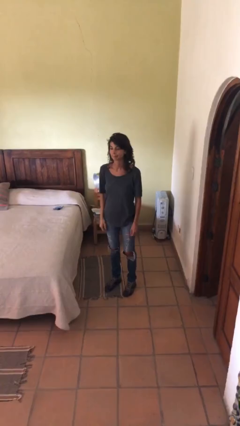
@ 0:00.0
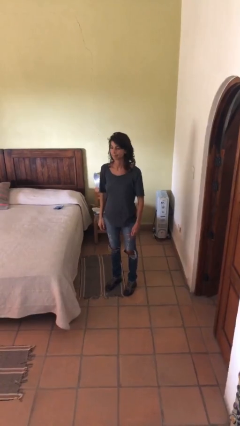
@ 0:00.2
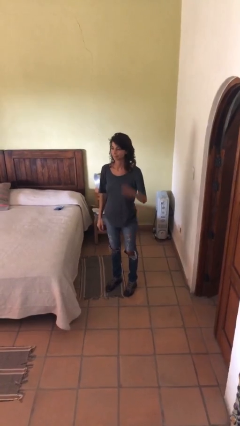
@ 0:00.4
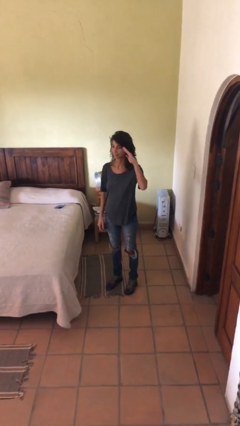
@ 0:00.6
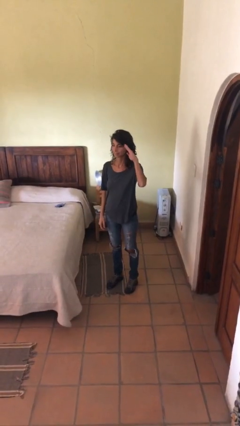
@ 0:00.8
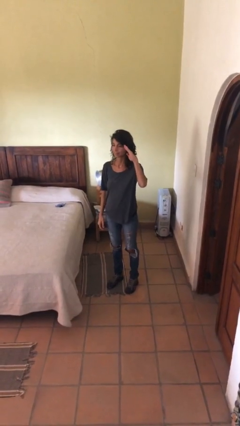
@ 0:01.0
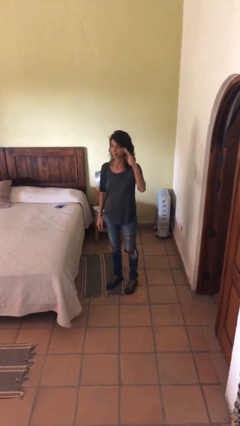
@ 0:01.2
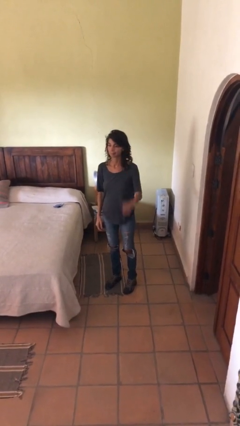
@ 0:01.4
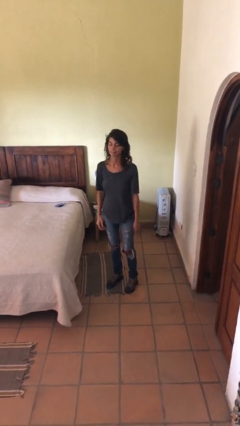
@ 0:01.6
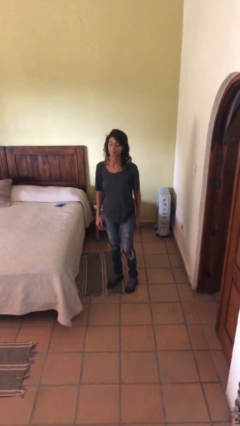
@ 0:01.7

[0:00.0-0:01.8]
person salutes

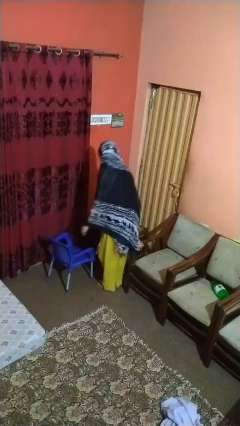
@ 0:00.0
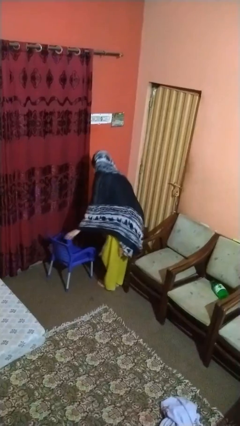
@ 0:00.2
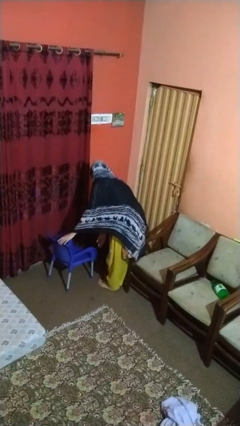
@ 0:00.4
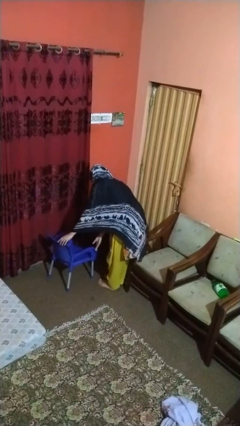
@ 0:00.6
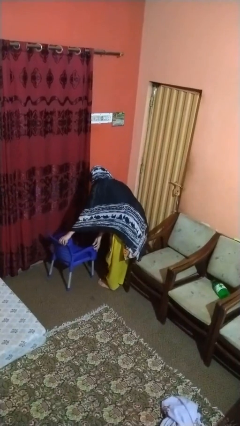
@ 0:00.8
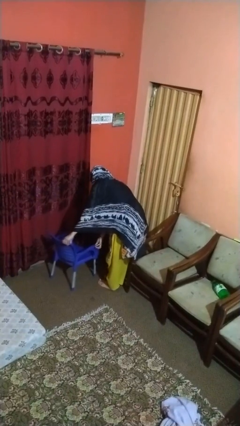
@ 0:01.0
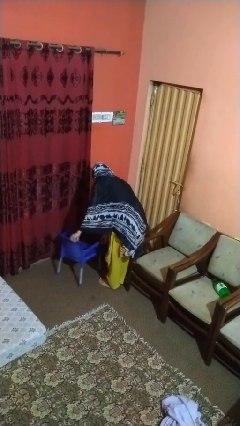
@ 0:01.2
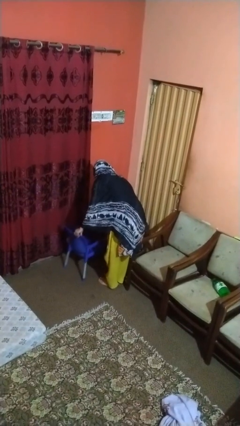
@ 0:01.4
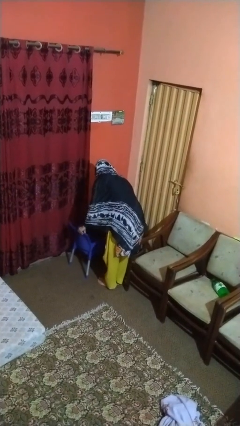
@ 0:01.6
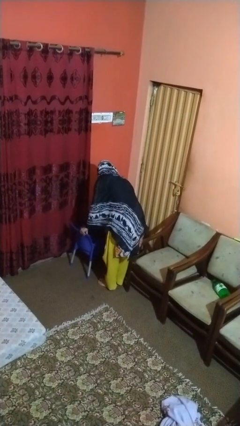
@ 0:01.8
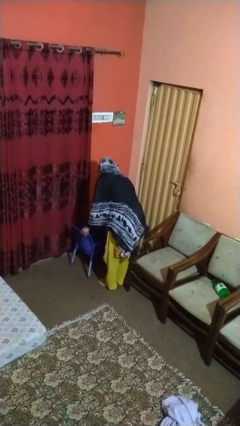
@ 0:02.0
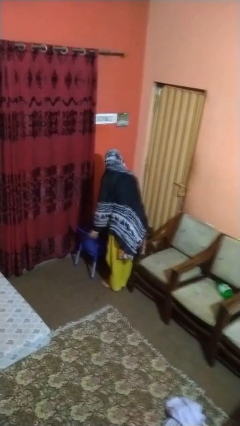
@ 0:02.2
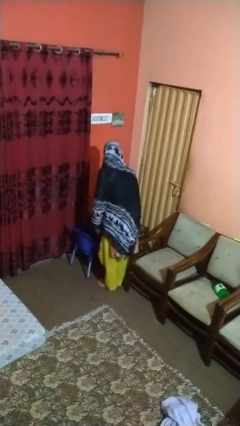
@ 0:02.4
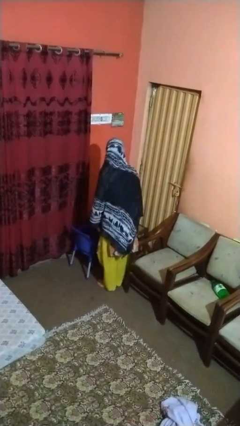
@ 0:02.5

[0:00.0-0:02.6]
person pushes in chair

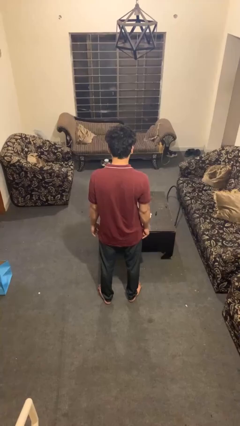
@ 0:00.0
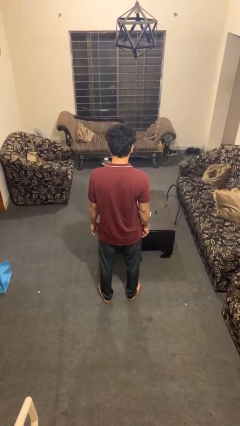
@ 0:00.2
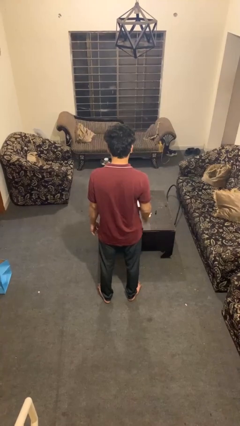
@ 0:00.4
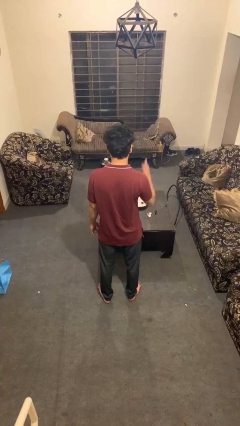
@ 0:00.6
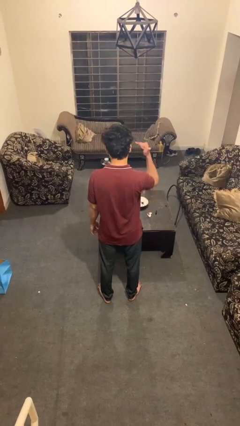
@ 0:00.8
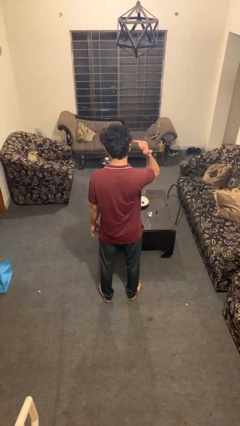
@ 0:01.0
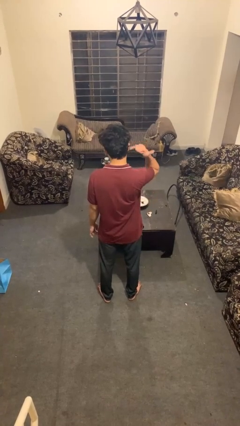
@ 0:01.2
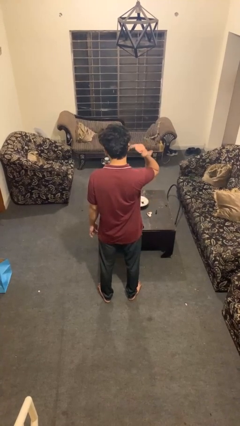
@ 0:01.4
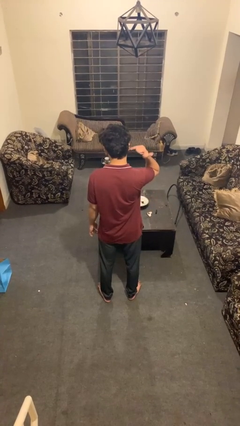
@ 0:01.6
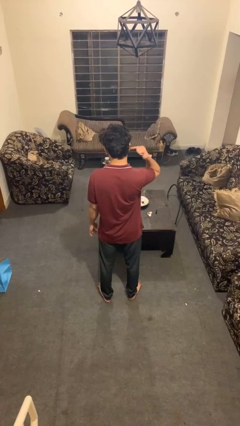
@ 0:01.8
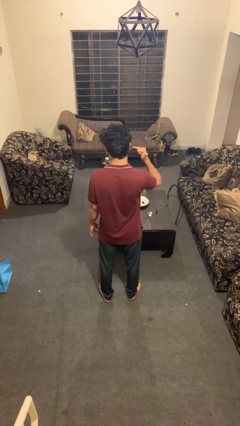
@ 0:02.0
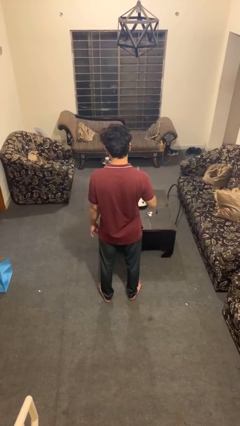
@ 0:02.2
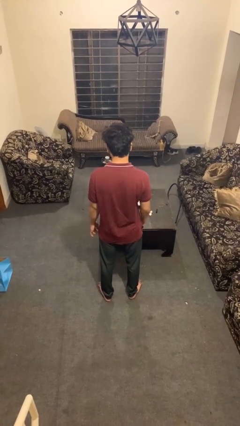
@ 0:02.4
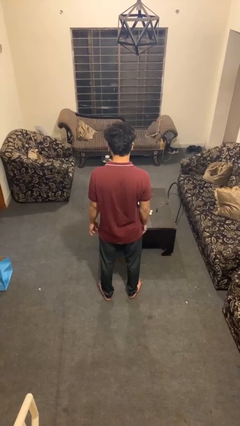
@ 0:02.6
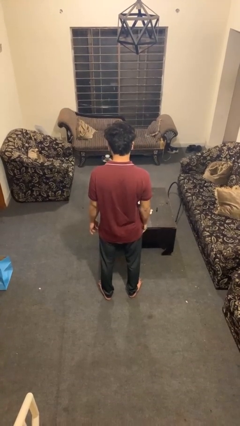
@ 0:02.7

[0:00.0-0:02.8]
person gestures hang loose

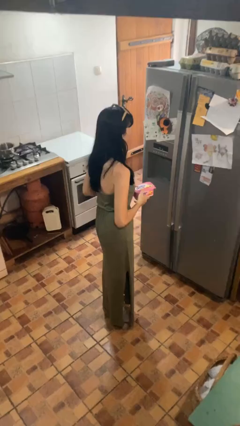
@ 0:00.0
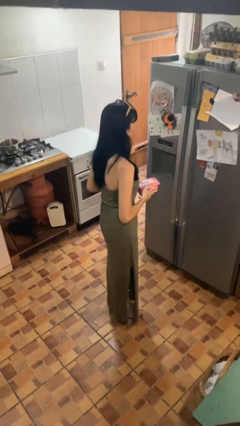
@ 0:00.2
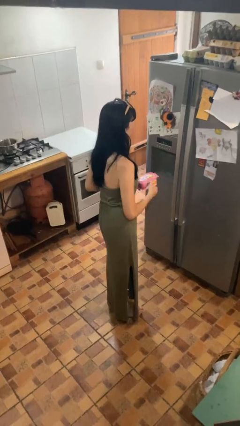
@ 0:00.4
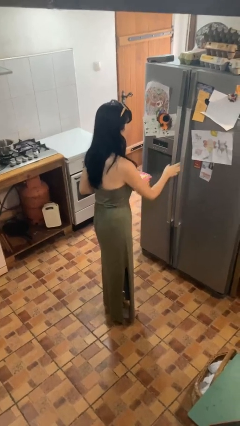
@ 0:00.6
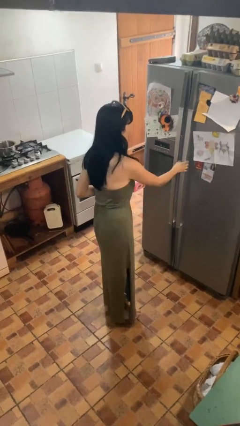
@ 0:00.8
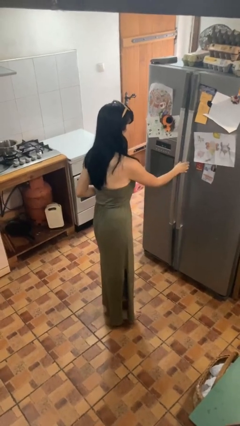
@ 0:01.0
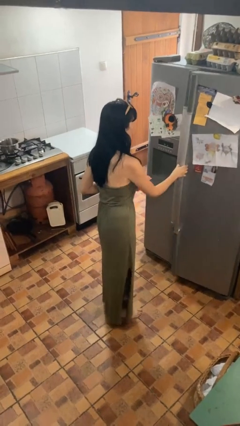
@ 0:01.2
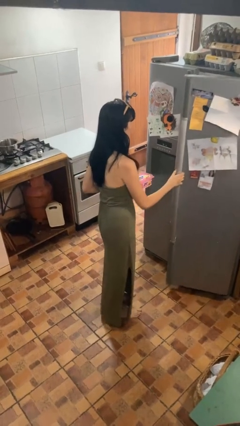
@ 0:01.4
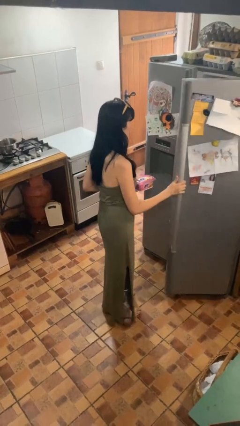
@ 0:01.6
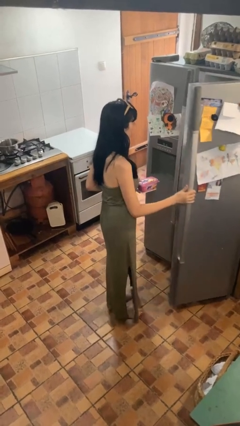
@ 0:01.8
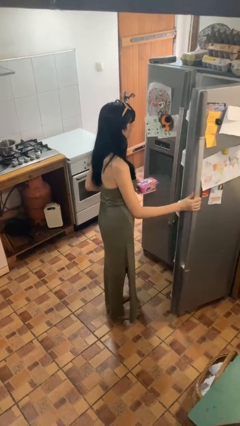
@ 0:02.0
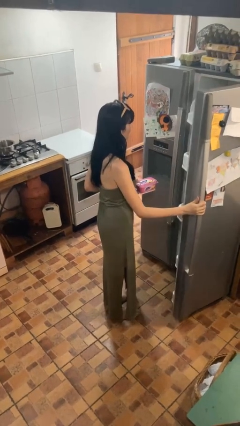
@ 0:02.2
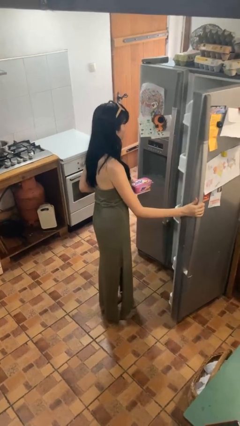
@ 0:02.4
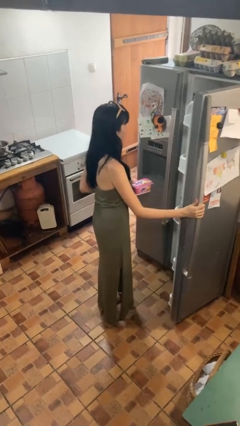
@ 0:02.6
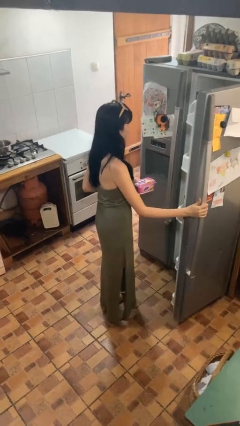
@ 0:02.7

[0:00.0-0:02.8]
person opens refrigerator

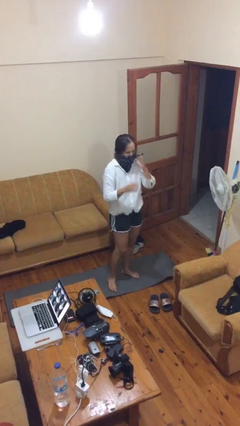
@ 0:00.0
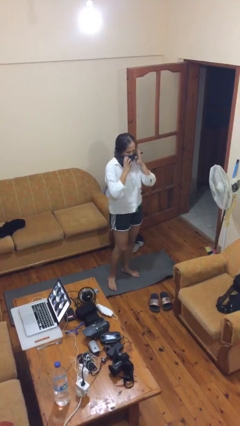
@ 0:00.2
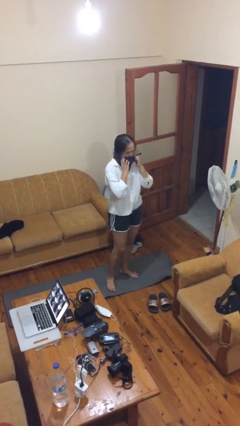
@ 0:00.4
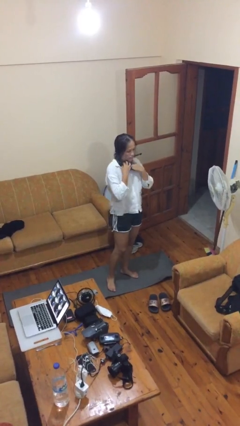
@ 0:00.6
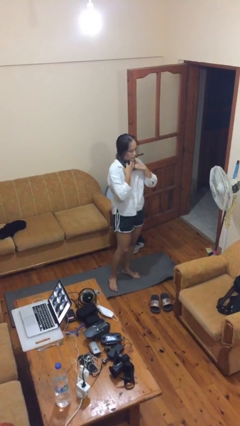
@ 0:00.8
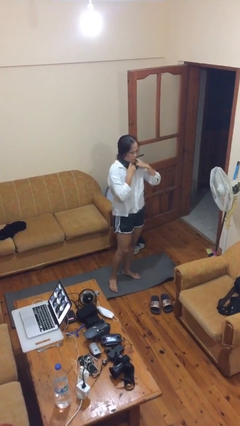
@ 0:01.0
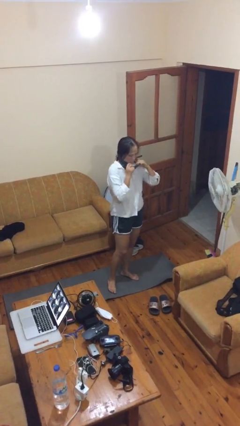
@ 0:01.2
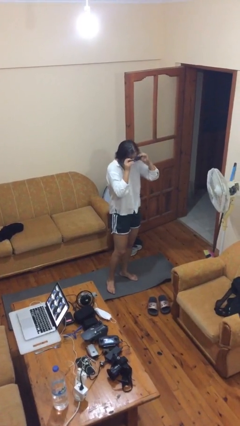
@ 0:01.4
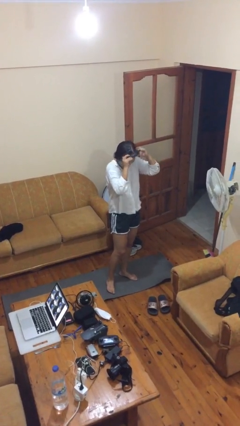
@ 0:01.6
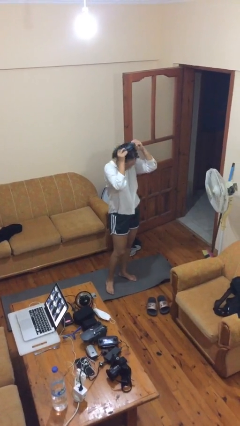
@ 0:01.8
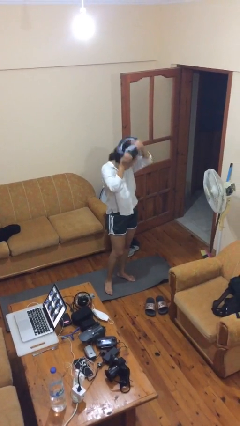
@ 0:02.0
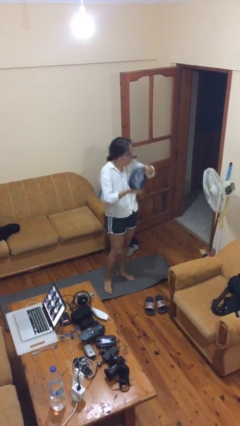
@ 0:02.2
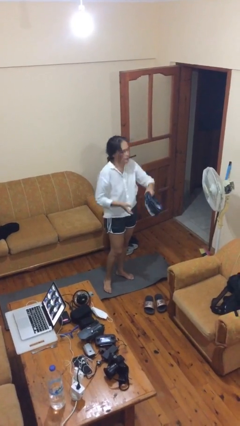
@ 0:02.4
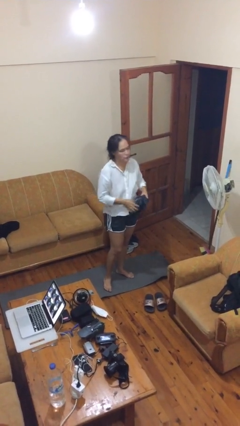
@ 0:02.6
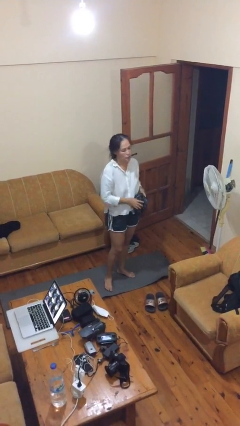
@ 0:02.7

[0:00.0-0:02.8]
person takes off scarf

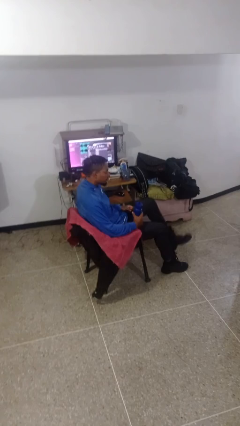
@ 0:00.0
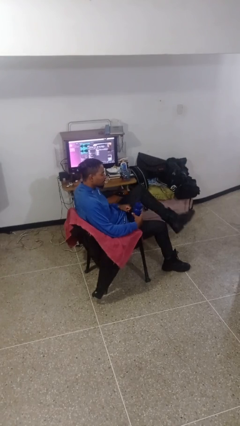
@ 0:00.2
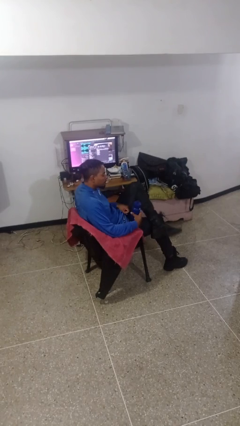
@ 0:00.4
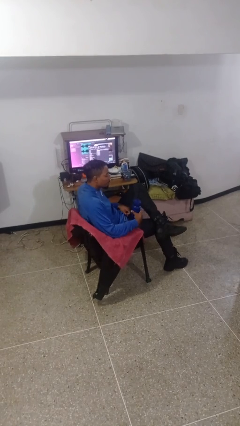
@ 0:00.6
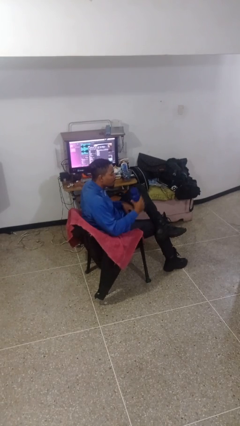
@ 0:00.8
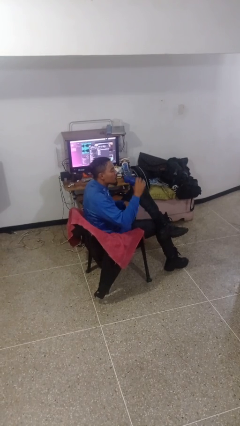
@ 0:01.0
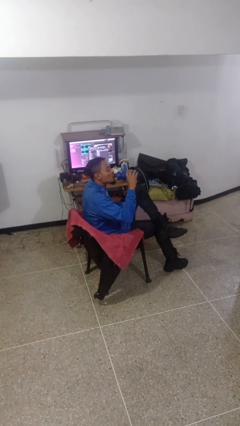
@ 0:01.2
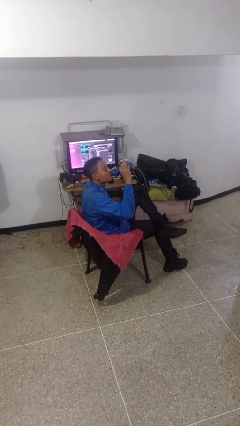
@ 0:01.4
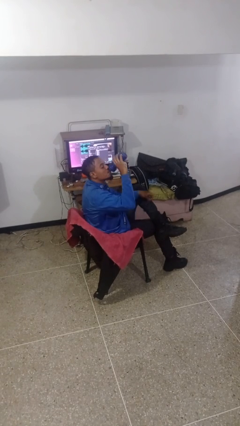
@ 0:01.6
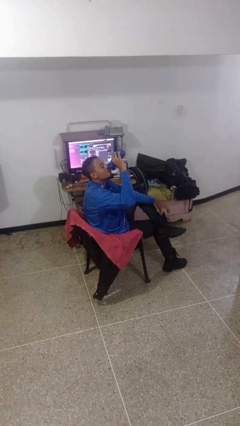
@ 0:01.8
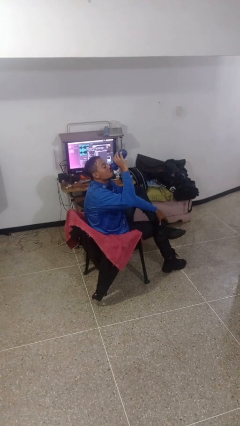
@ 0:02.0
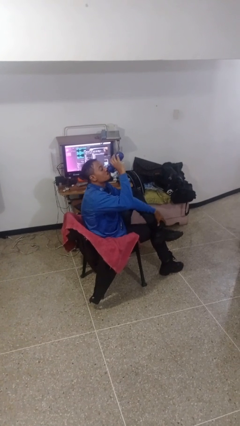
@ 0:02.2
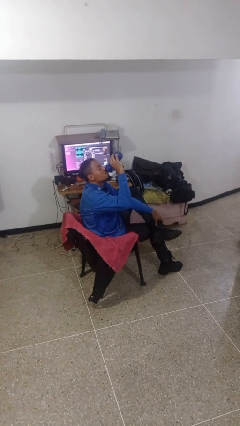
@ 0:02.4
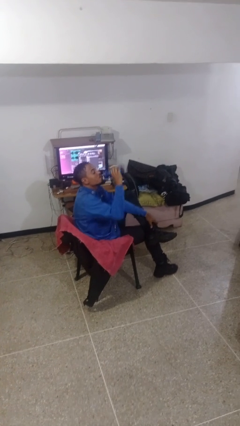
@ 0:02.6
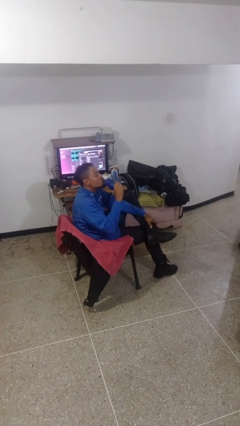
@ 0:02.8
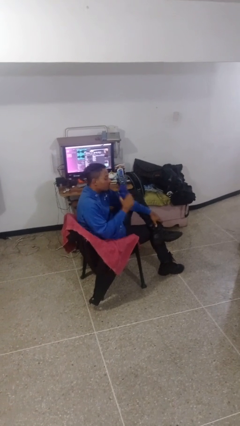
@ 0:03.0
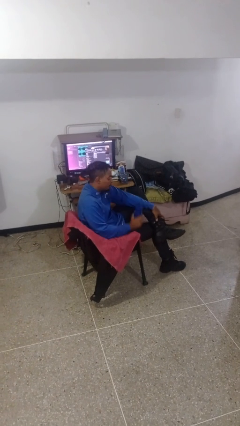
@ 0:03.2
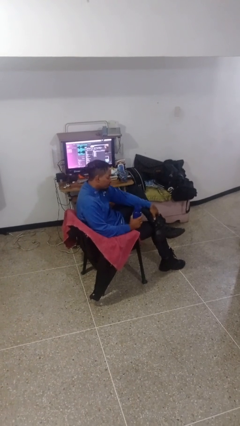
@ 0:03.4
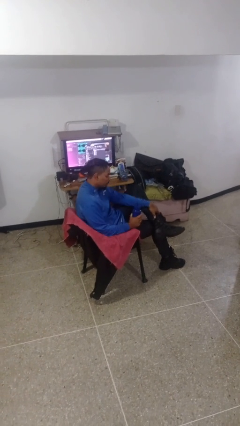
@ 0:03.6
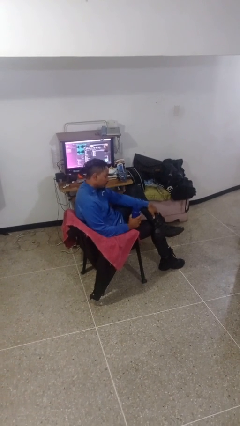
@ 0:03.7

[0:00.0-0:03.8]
person drinks from bottle

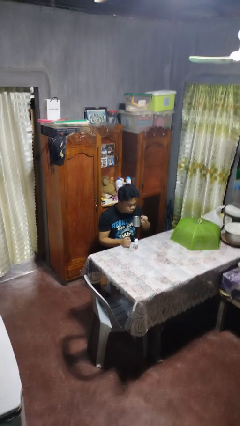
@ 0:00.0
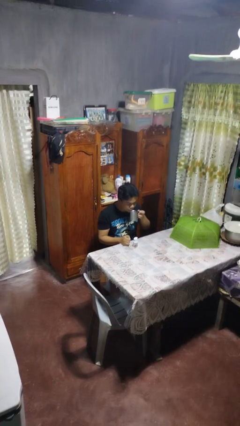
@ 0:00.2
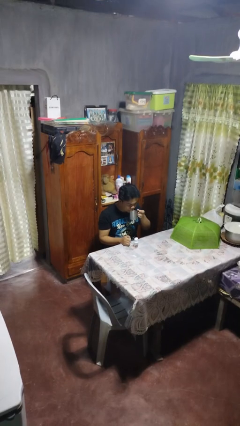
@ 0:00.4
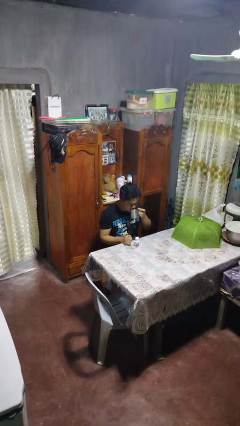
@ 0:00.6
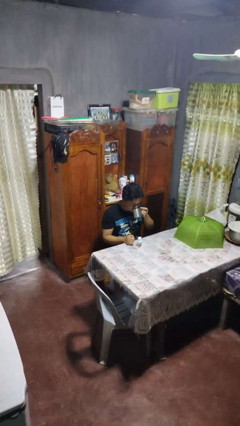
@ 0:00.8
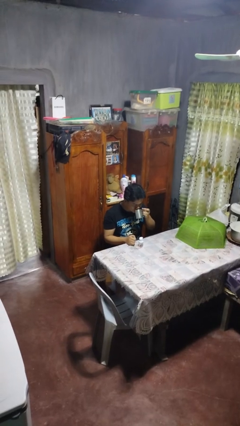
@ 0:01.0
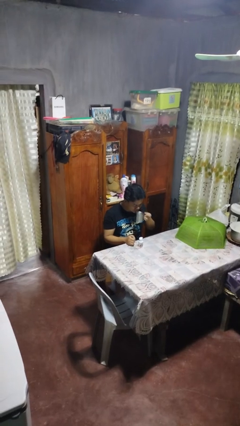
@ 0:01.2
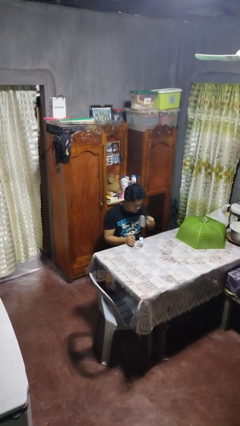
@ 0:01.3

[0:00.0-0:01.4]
person drinks from cup
